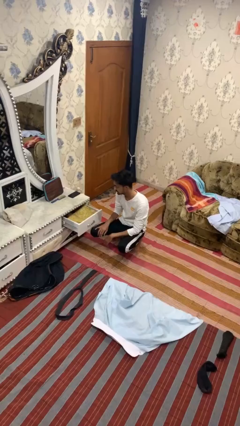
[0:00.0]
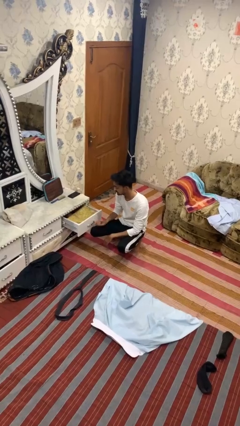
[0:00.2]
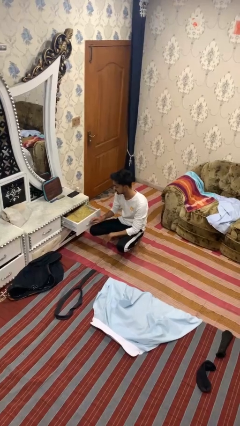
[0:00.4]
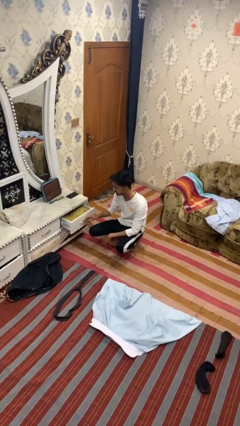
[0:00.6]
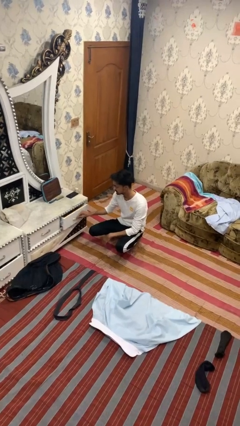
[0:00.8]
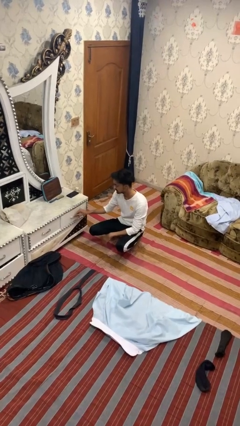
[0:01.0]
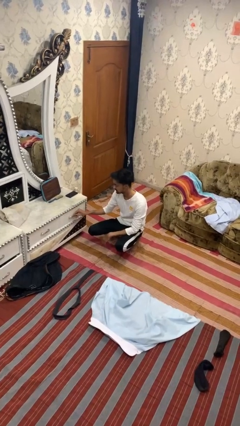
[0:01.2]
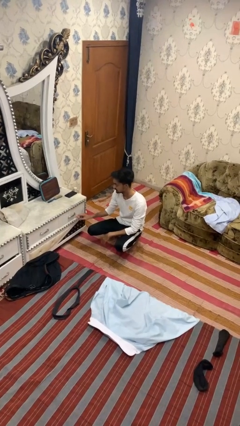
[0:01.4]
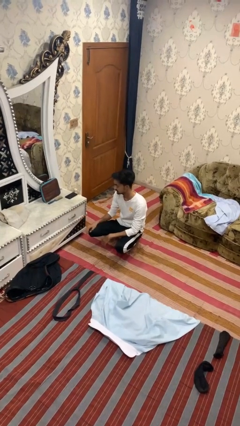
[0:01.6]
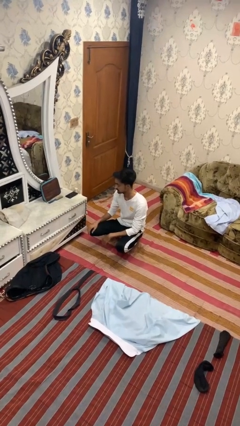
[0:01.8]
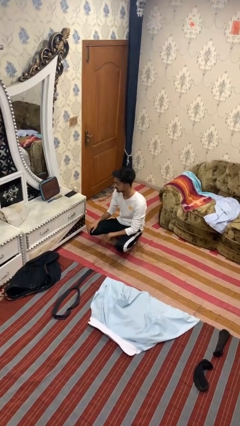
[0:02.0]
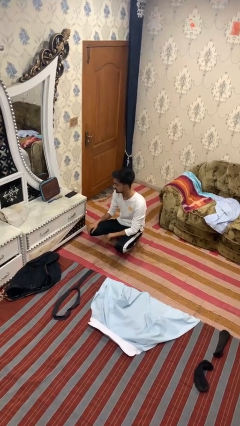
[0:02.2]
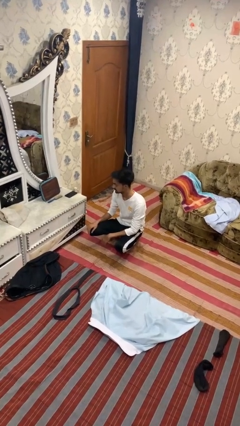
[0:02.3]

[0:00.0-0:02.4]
person closes dresser drawer

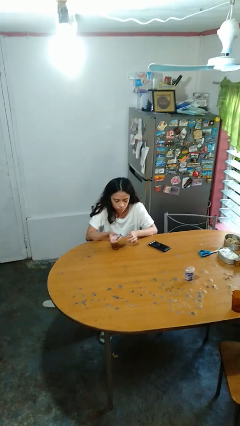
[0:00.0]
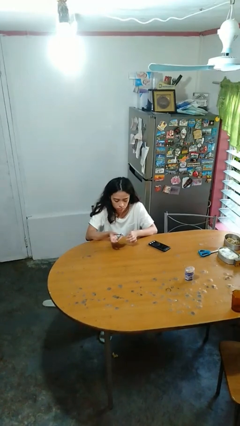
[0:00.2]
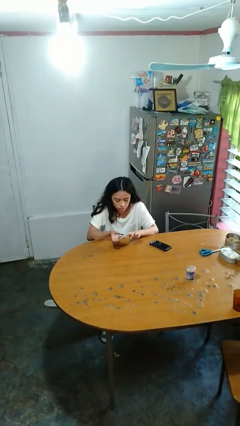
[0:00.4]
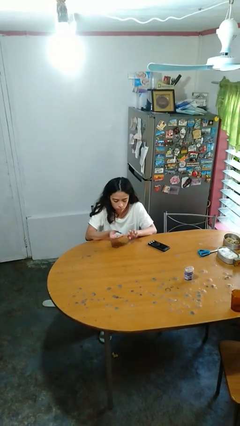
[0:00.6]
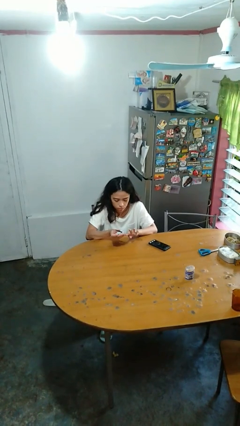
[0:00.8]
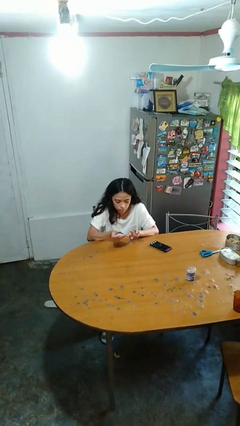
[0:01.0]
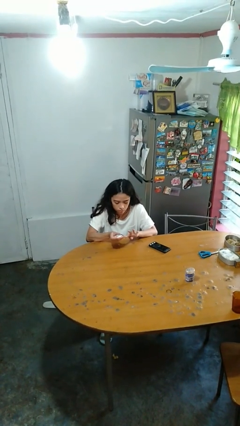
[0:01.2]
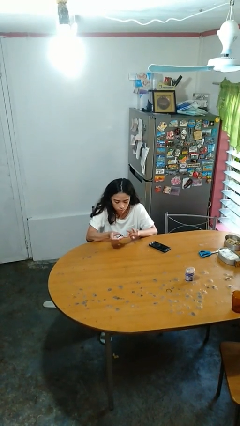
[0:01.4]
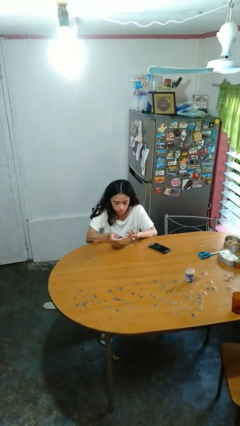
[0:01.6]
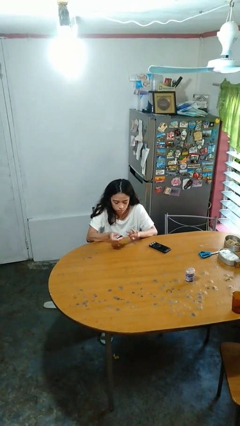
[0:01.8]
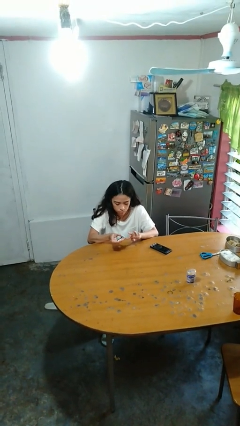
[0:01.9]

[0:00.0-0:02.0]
person clips fingernails

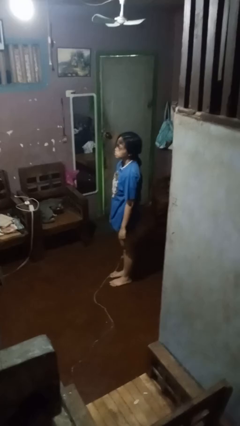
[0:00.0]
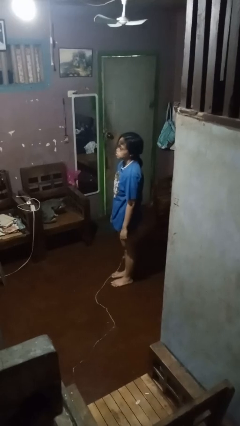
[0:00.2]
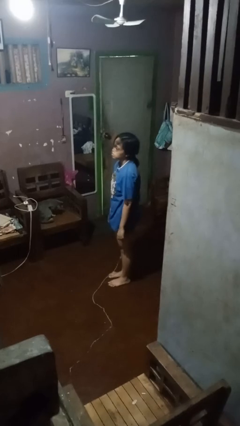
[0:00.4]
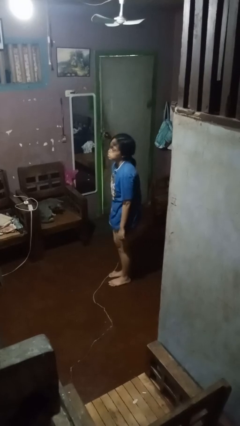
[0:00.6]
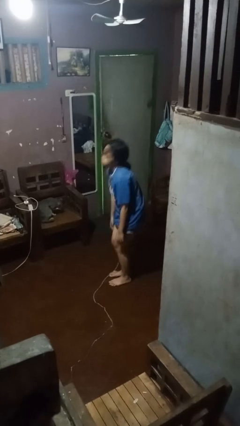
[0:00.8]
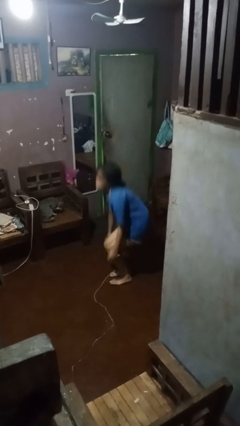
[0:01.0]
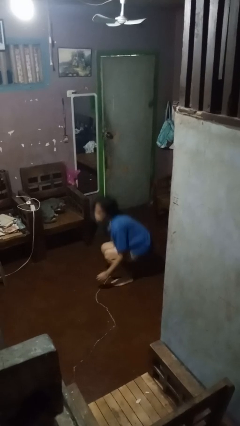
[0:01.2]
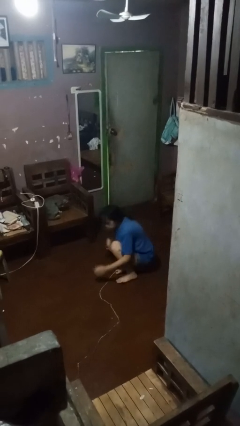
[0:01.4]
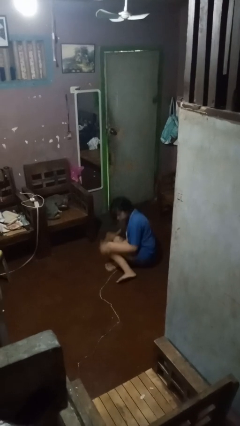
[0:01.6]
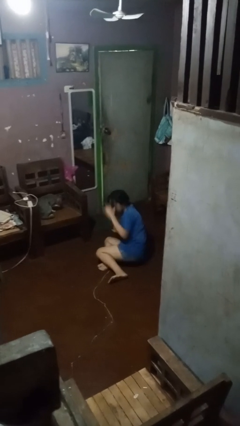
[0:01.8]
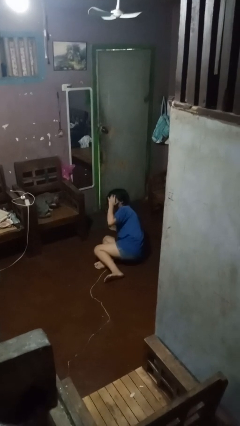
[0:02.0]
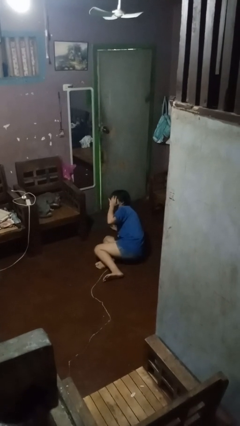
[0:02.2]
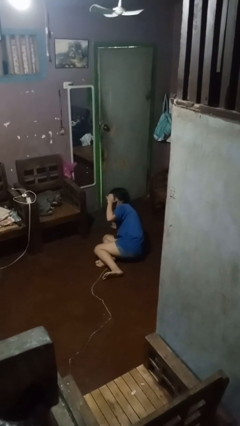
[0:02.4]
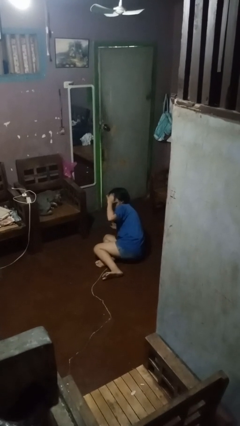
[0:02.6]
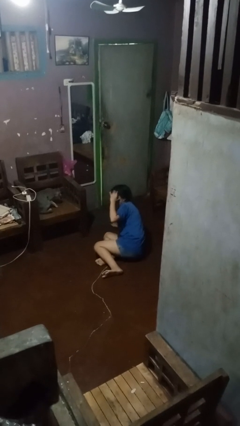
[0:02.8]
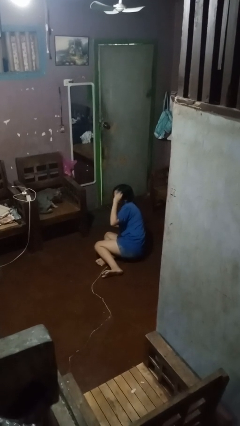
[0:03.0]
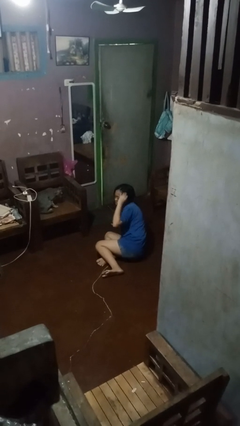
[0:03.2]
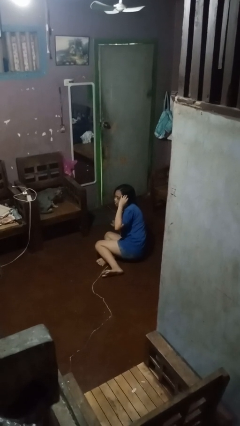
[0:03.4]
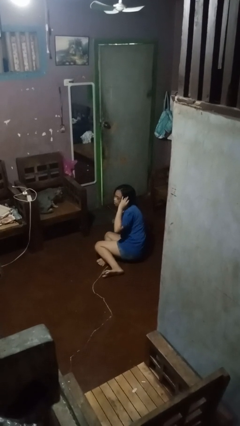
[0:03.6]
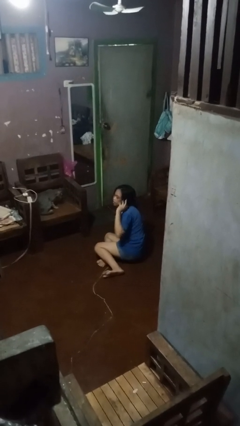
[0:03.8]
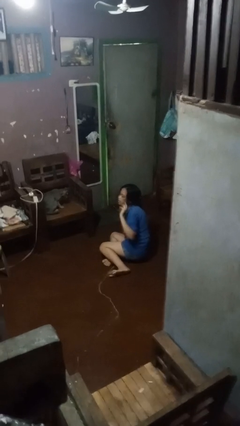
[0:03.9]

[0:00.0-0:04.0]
person falls while standing

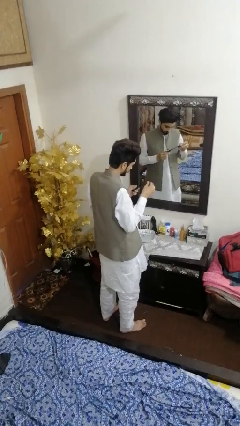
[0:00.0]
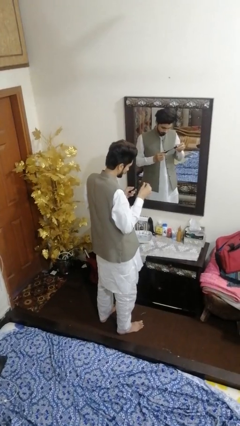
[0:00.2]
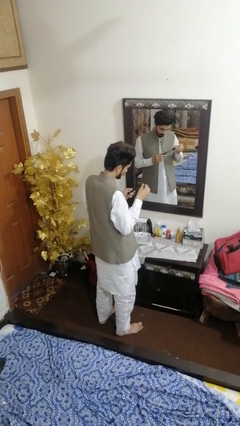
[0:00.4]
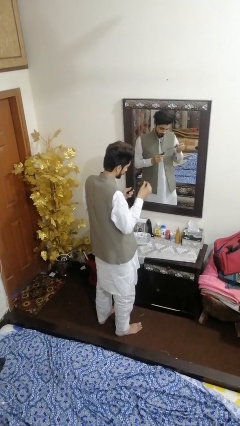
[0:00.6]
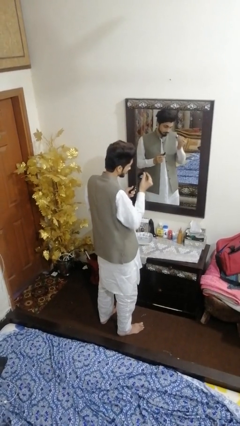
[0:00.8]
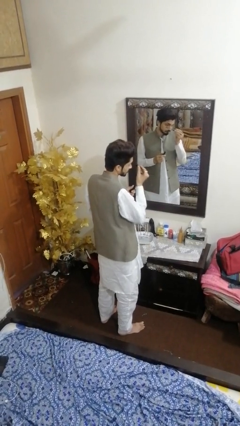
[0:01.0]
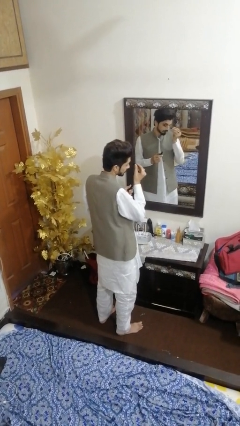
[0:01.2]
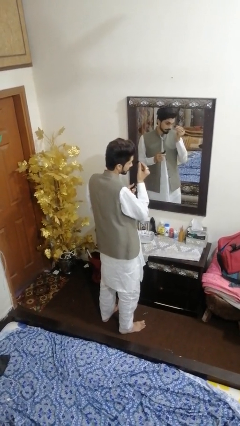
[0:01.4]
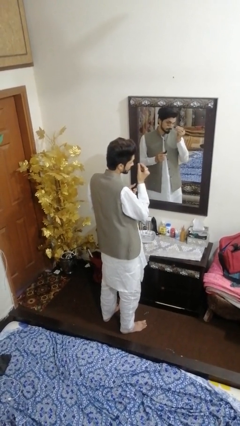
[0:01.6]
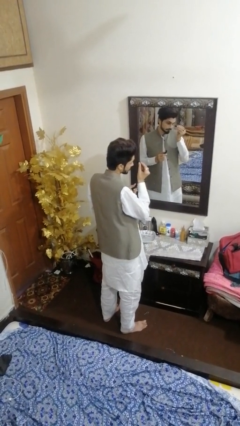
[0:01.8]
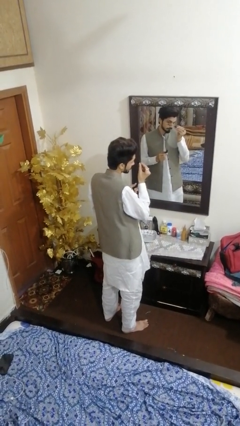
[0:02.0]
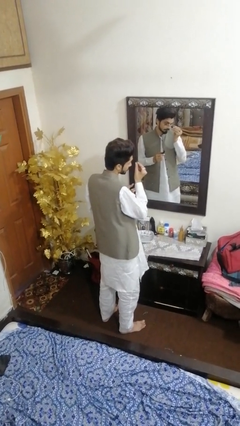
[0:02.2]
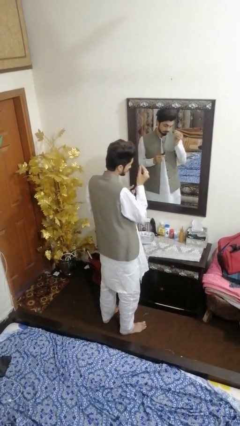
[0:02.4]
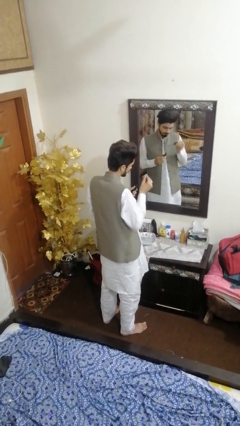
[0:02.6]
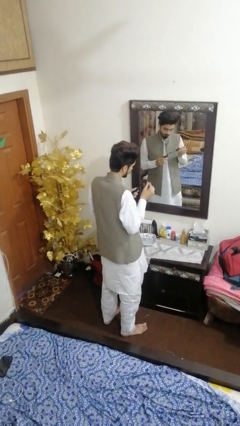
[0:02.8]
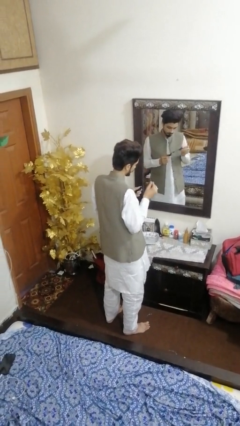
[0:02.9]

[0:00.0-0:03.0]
person applies eye makeup

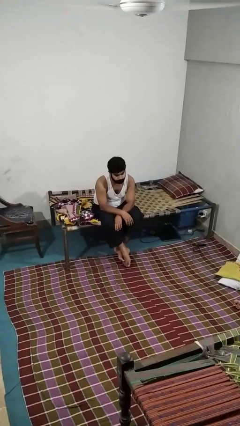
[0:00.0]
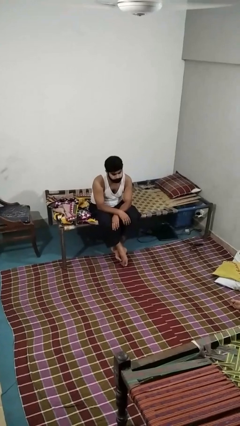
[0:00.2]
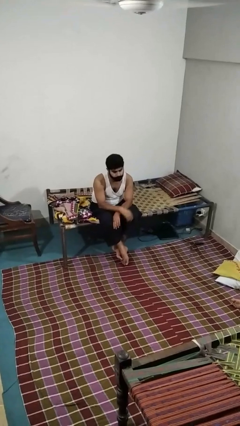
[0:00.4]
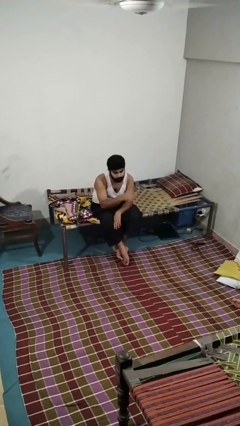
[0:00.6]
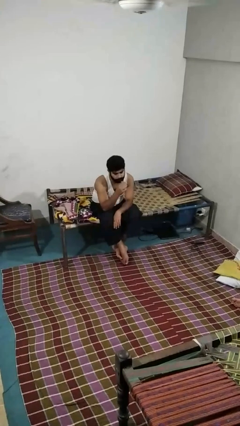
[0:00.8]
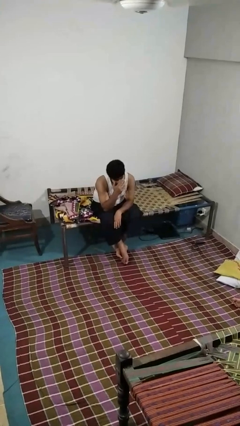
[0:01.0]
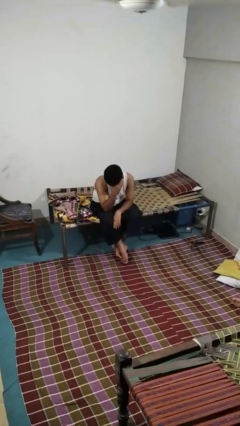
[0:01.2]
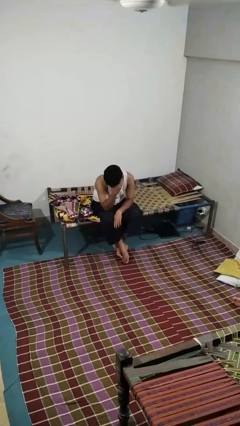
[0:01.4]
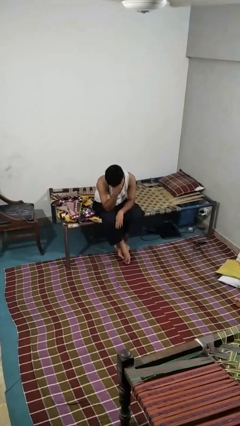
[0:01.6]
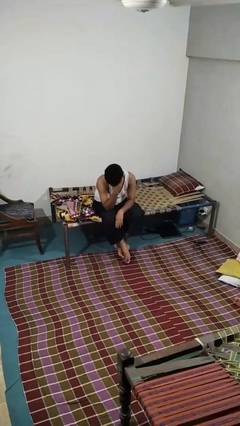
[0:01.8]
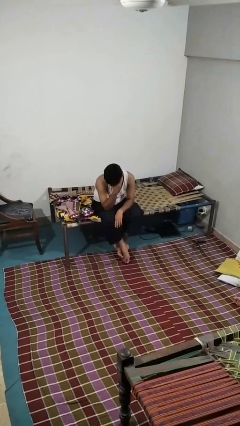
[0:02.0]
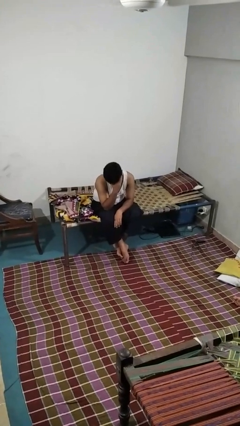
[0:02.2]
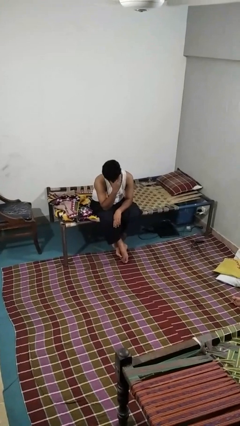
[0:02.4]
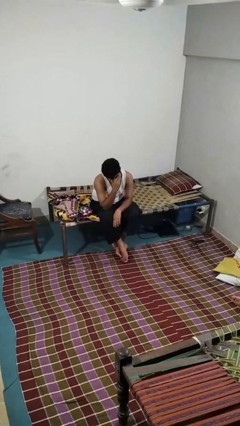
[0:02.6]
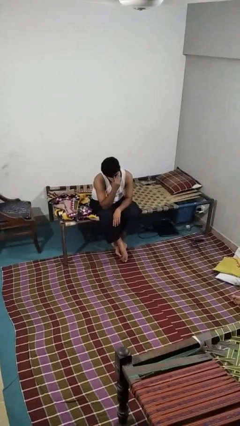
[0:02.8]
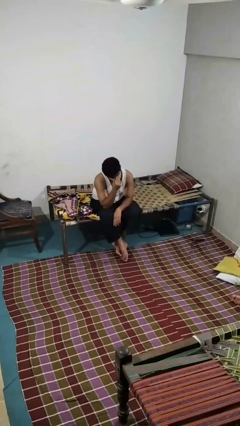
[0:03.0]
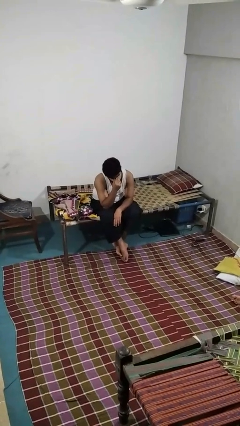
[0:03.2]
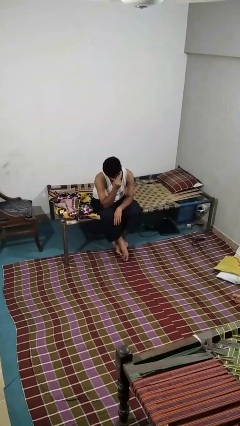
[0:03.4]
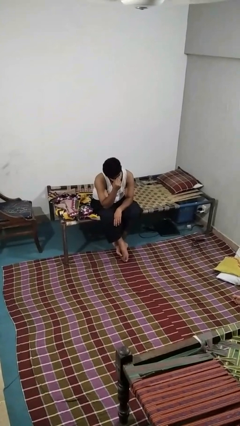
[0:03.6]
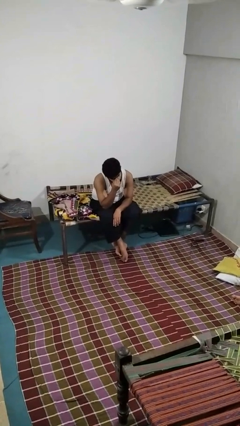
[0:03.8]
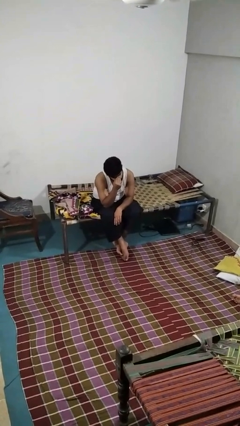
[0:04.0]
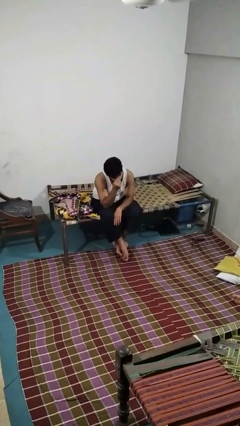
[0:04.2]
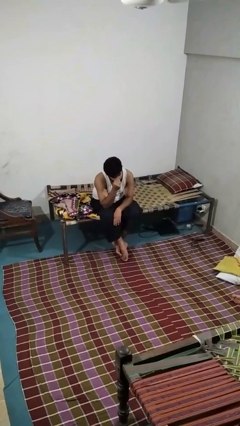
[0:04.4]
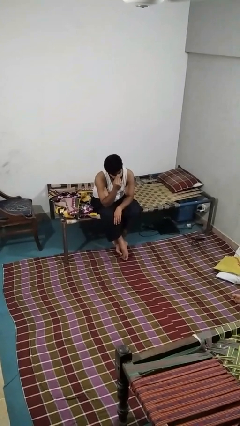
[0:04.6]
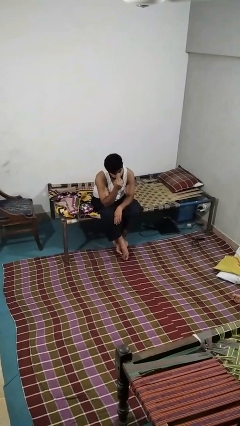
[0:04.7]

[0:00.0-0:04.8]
person covers face with hands

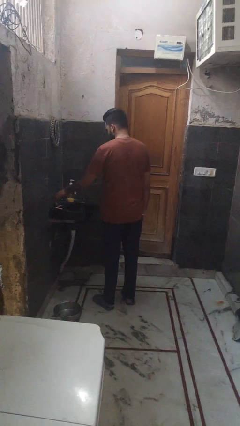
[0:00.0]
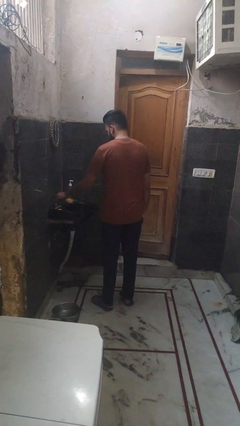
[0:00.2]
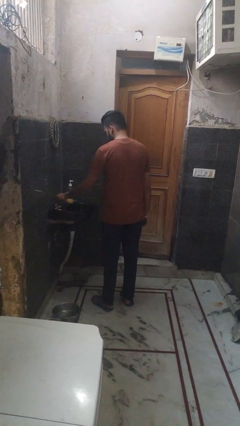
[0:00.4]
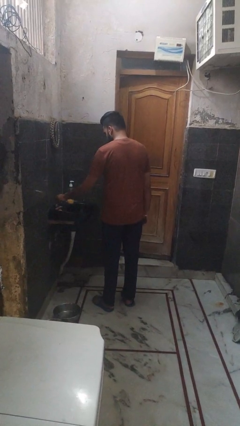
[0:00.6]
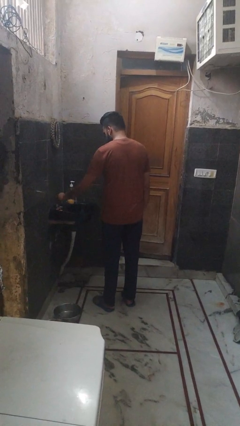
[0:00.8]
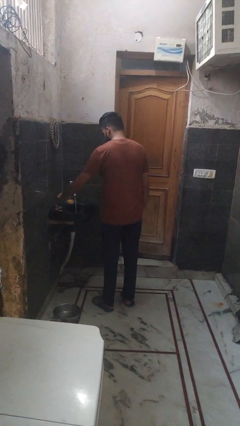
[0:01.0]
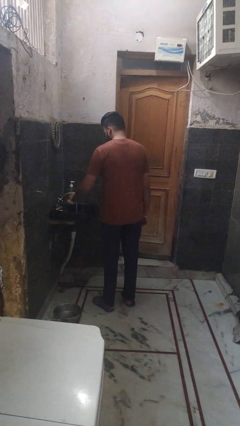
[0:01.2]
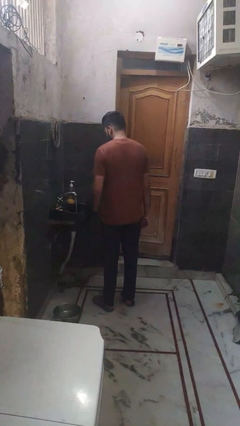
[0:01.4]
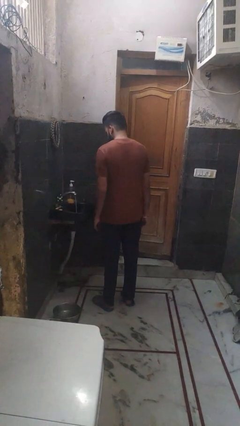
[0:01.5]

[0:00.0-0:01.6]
person turns on faucet

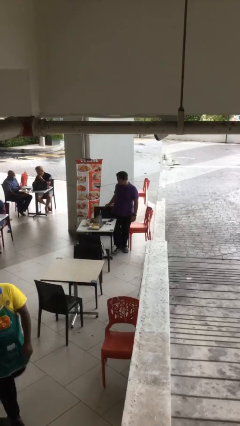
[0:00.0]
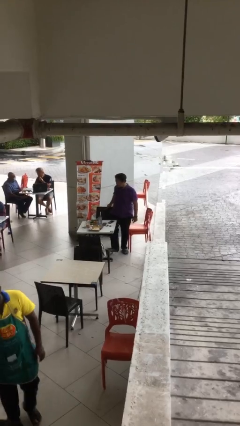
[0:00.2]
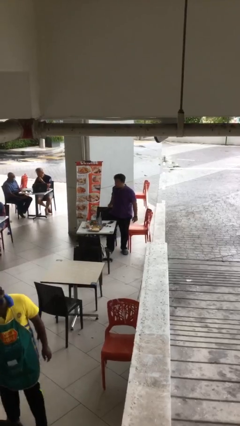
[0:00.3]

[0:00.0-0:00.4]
person sits down
